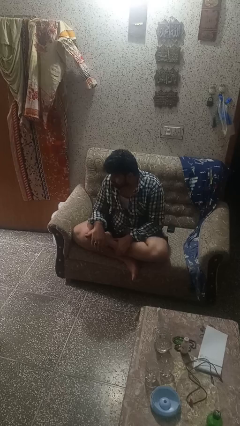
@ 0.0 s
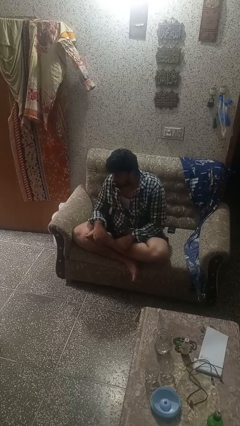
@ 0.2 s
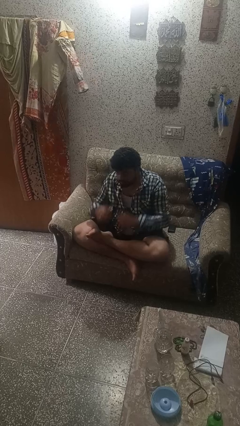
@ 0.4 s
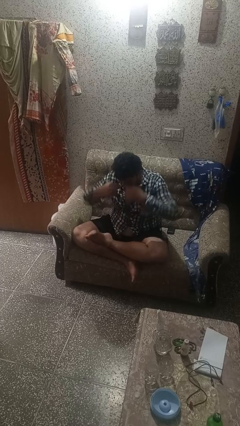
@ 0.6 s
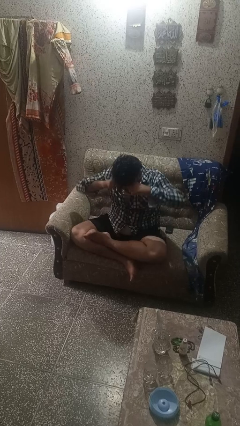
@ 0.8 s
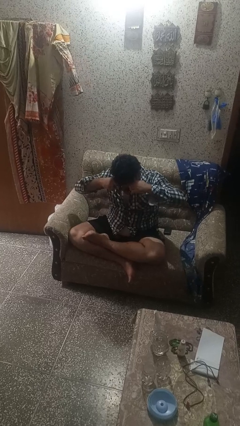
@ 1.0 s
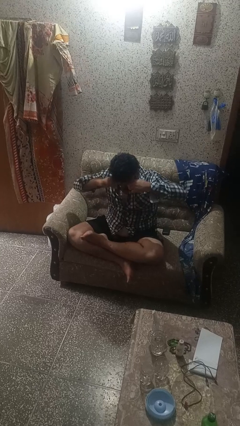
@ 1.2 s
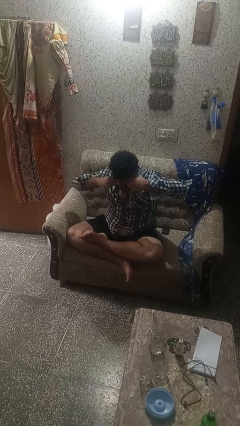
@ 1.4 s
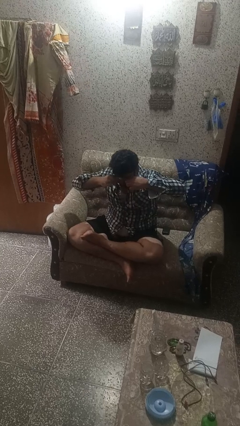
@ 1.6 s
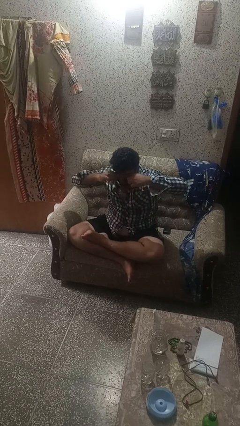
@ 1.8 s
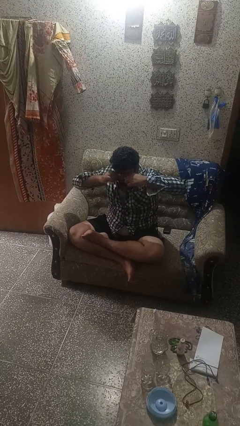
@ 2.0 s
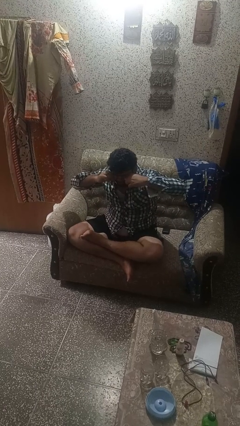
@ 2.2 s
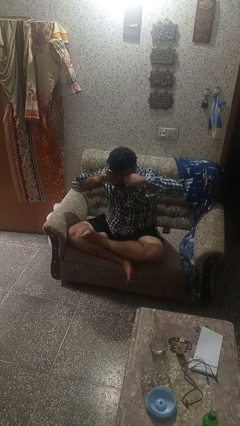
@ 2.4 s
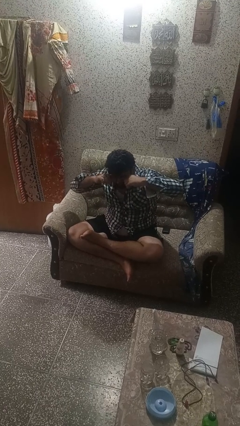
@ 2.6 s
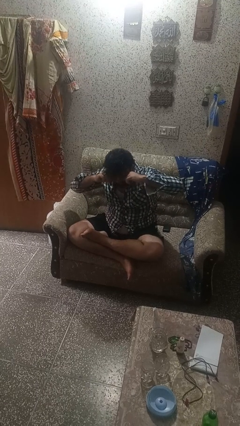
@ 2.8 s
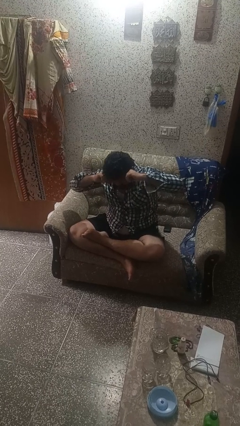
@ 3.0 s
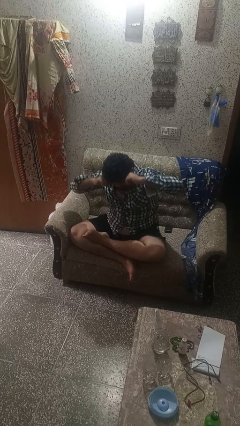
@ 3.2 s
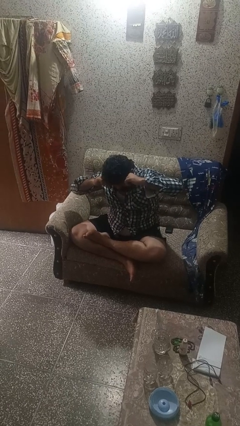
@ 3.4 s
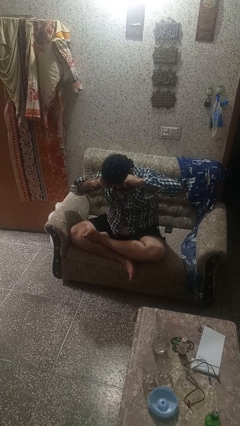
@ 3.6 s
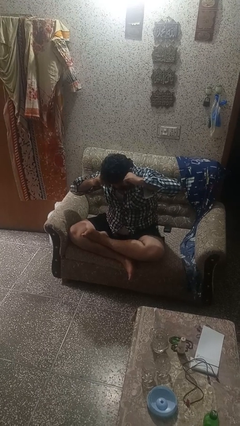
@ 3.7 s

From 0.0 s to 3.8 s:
person rubs eyes

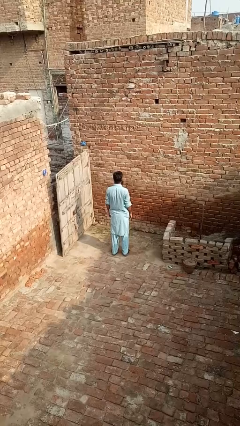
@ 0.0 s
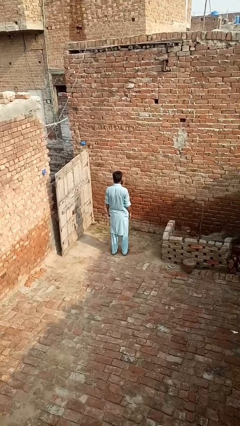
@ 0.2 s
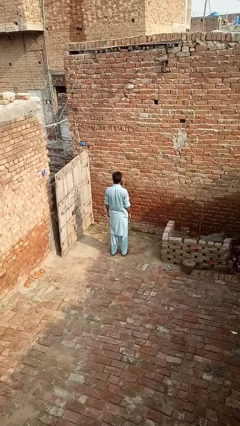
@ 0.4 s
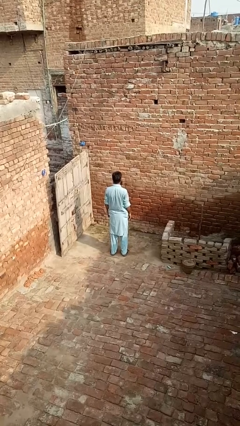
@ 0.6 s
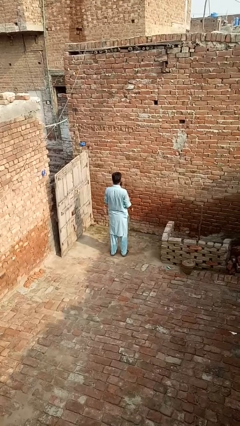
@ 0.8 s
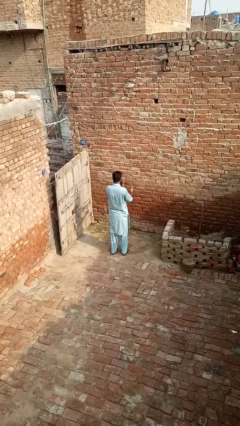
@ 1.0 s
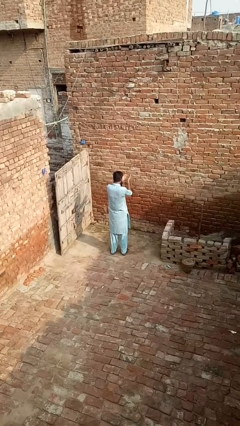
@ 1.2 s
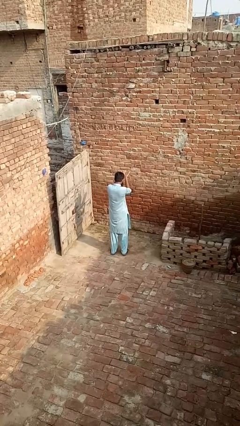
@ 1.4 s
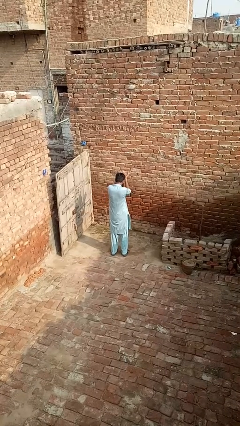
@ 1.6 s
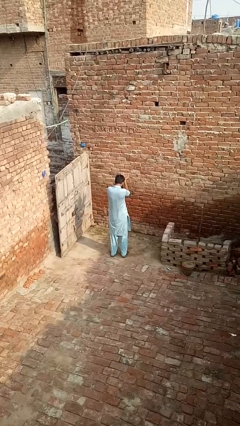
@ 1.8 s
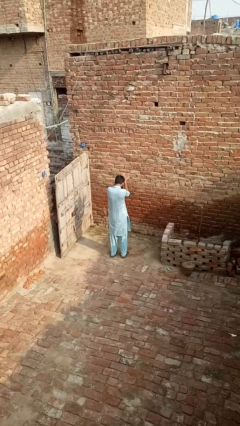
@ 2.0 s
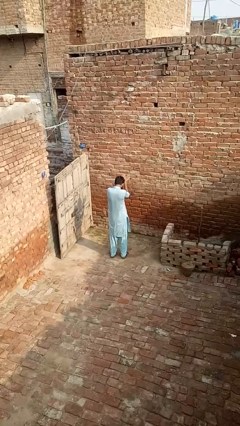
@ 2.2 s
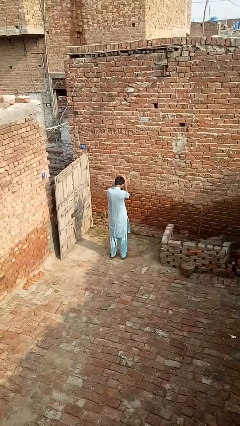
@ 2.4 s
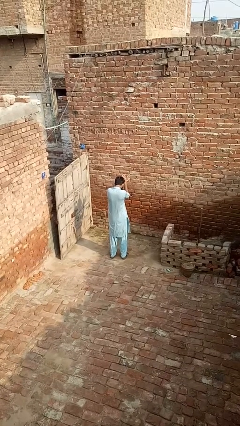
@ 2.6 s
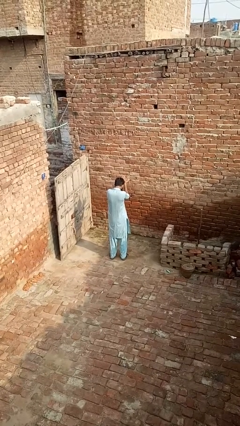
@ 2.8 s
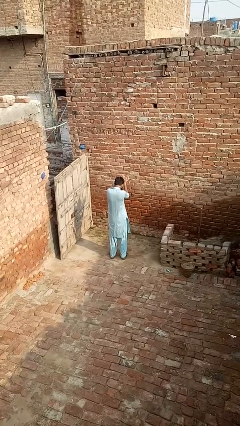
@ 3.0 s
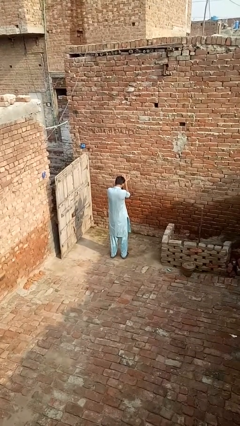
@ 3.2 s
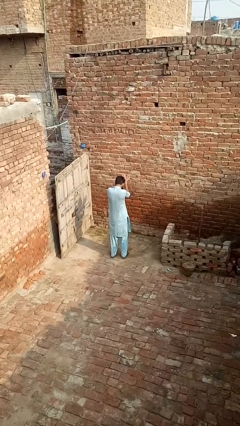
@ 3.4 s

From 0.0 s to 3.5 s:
person prays

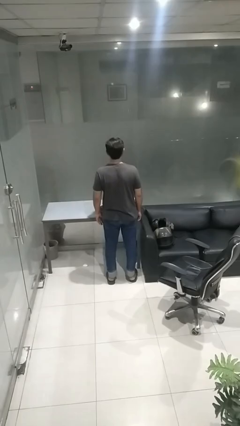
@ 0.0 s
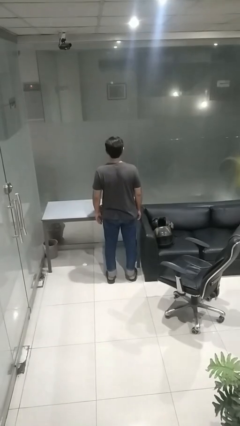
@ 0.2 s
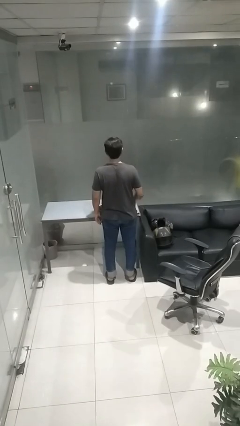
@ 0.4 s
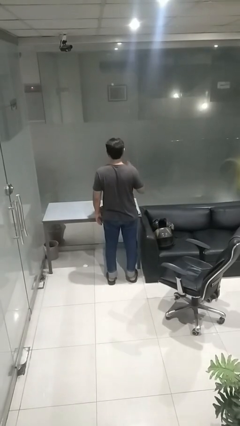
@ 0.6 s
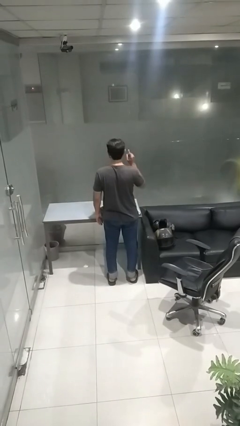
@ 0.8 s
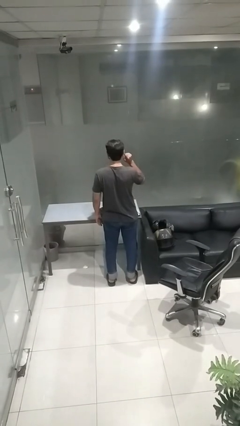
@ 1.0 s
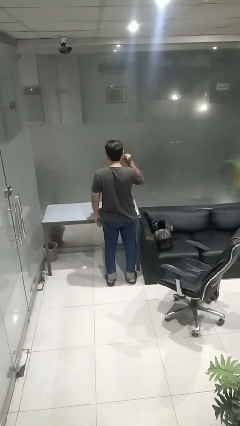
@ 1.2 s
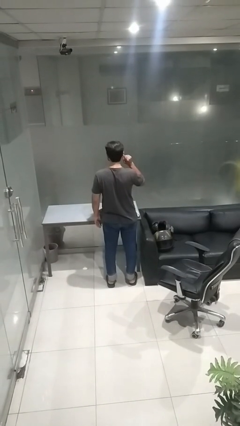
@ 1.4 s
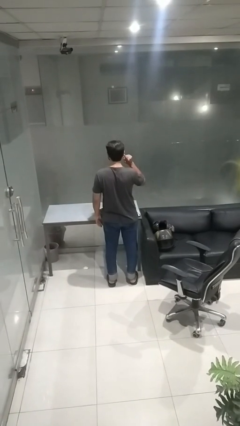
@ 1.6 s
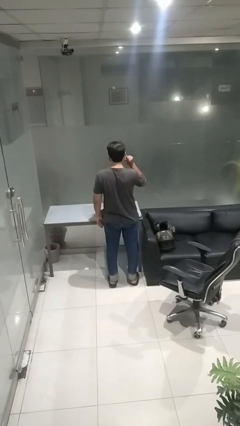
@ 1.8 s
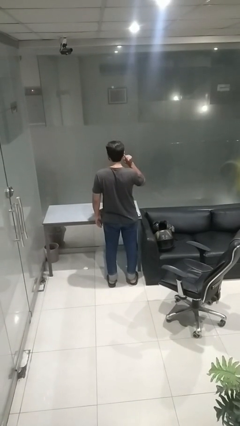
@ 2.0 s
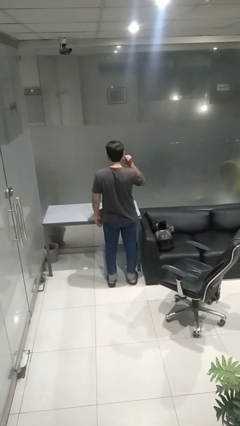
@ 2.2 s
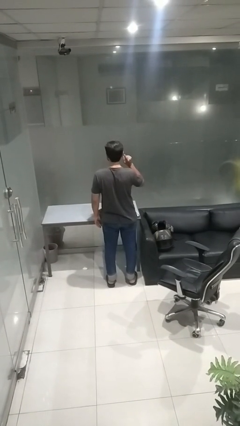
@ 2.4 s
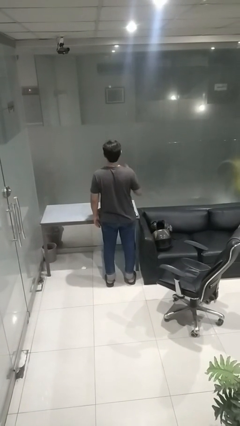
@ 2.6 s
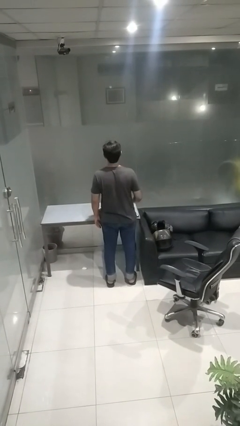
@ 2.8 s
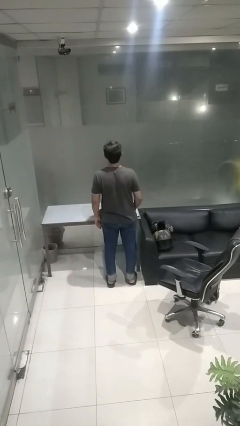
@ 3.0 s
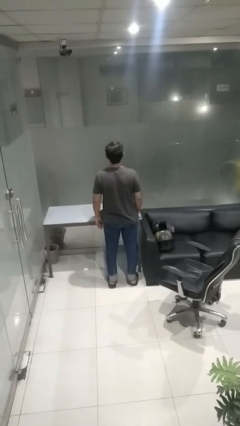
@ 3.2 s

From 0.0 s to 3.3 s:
person gestures listen closely

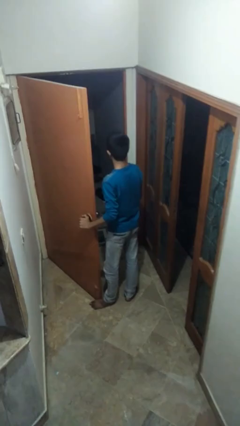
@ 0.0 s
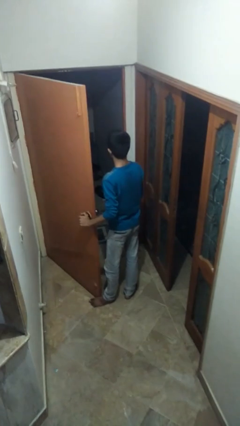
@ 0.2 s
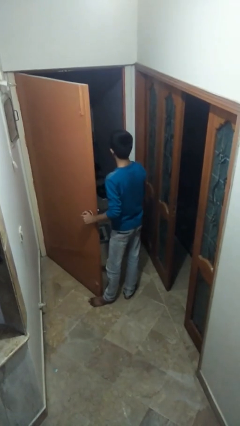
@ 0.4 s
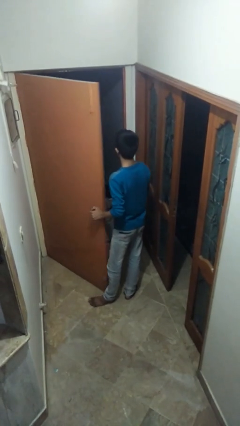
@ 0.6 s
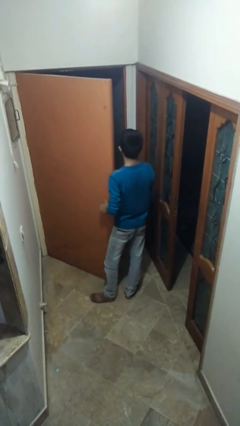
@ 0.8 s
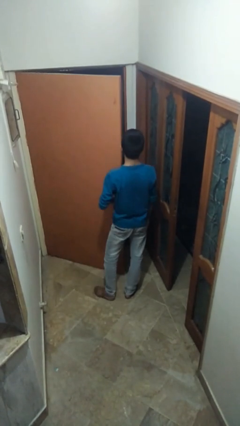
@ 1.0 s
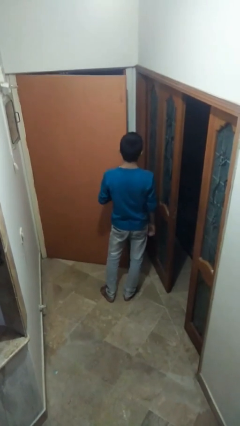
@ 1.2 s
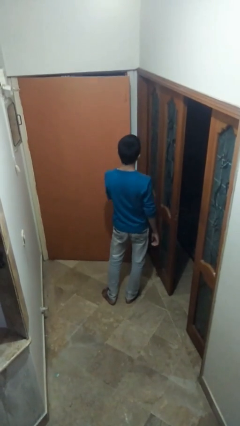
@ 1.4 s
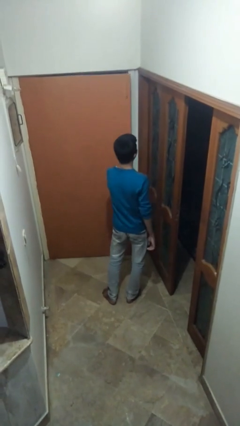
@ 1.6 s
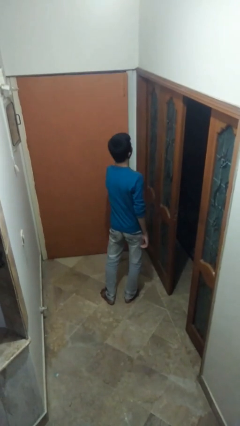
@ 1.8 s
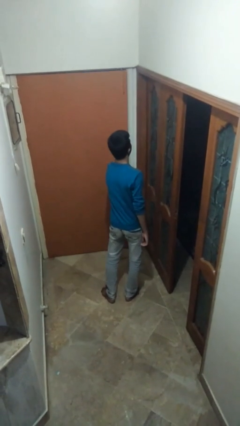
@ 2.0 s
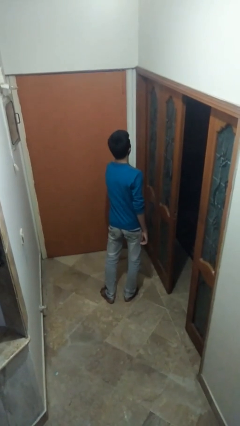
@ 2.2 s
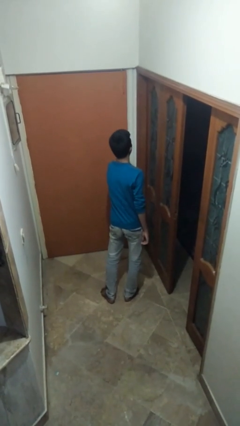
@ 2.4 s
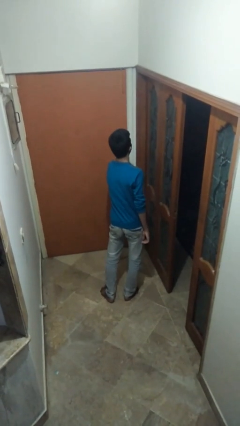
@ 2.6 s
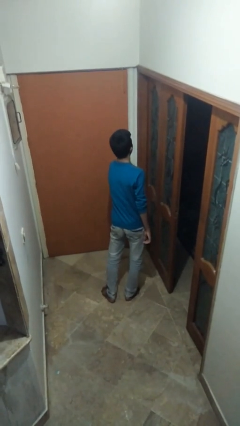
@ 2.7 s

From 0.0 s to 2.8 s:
person closes facility door

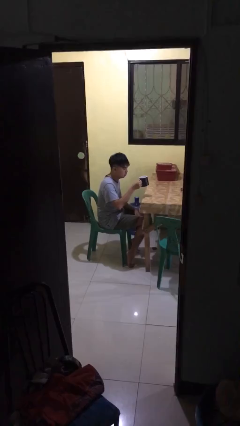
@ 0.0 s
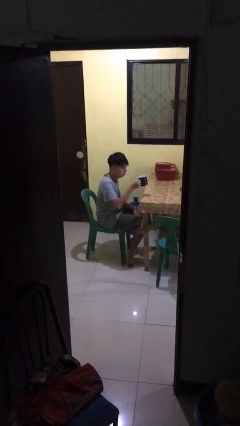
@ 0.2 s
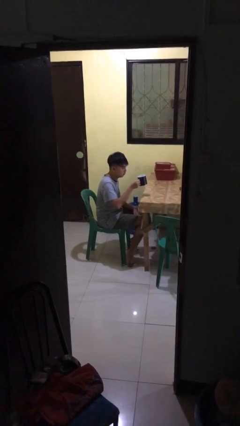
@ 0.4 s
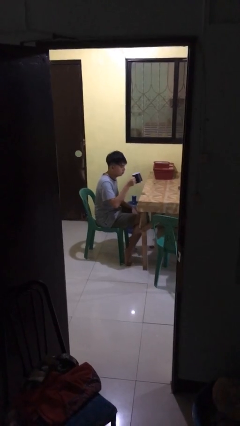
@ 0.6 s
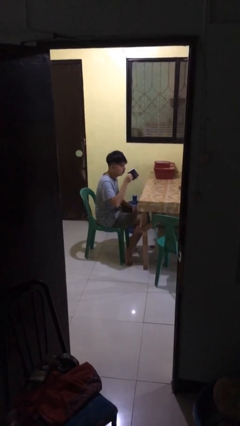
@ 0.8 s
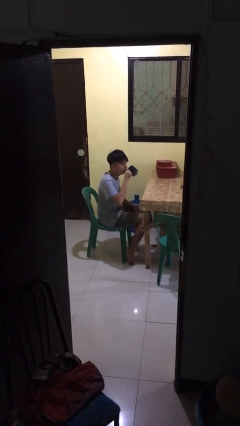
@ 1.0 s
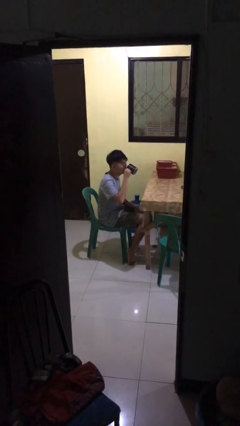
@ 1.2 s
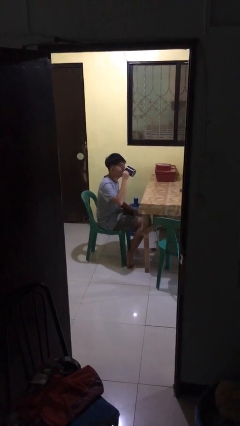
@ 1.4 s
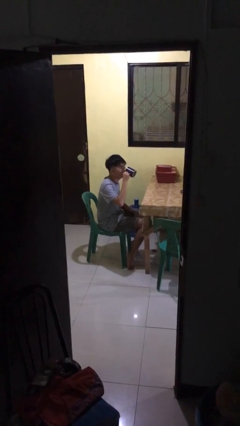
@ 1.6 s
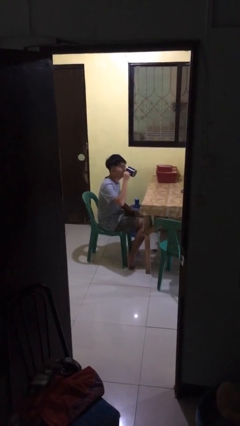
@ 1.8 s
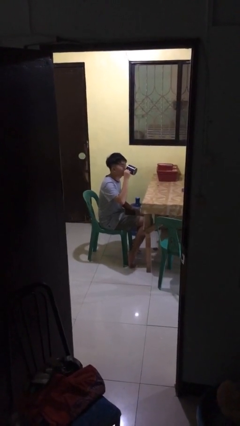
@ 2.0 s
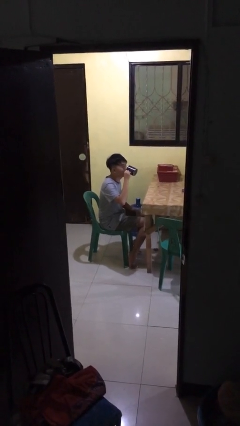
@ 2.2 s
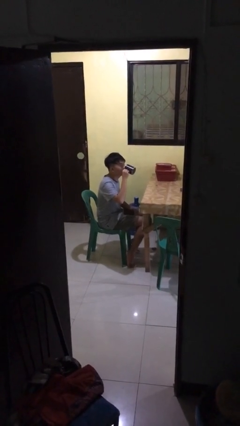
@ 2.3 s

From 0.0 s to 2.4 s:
person drinks from mug

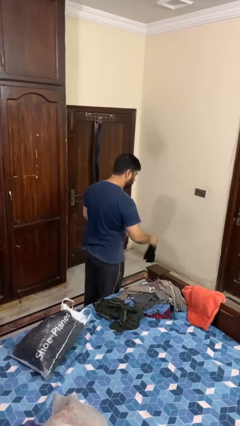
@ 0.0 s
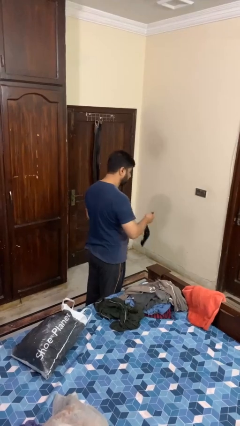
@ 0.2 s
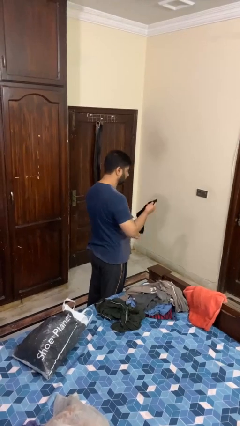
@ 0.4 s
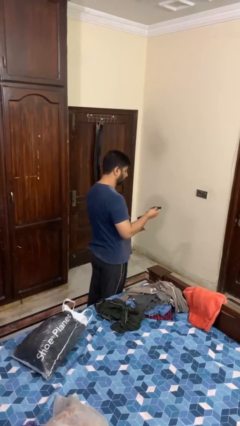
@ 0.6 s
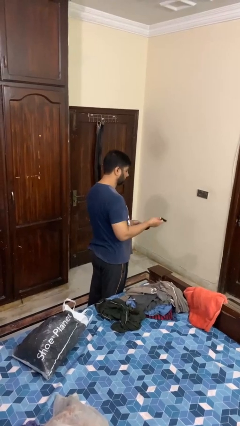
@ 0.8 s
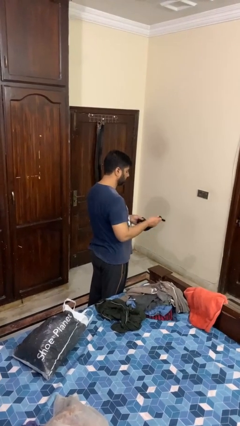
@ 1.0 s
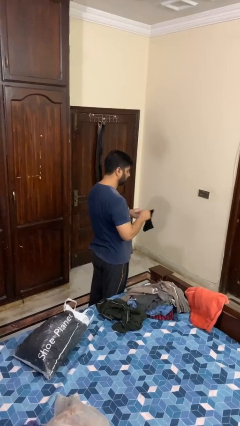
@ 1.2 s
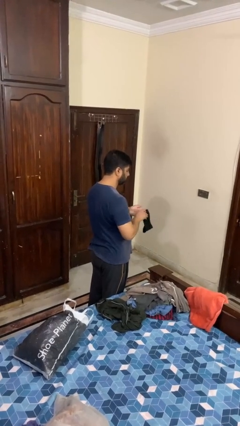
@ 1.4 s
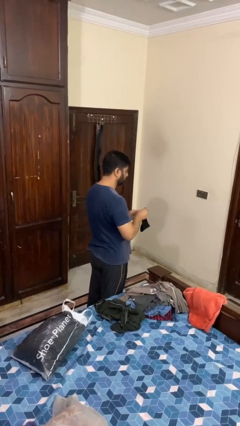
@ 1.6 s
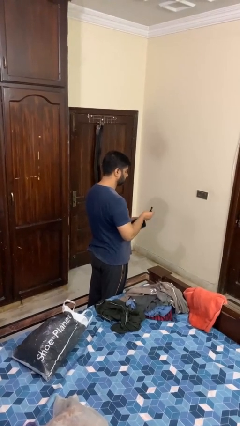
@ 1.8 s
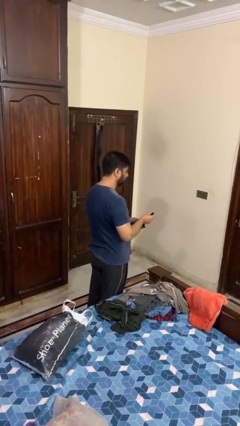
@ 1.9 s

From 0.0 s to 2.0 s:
person folds socks
